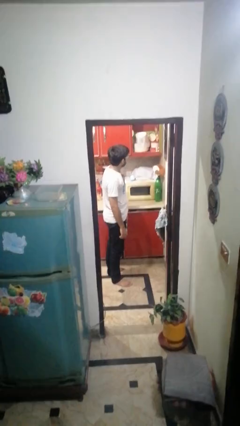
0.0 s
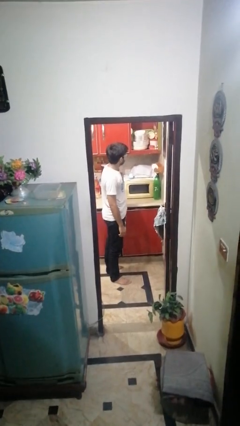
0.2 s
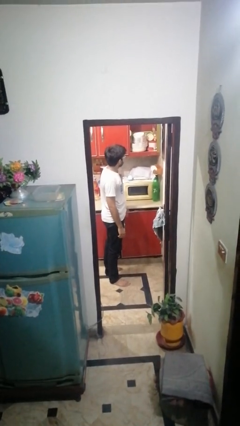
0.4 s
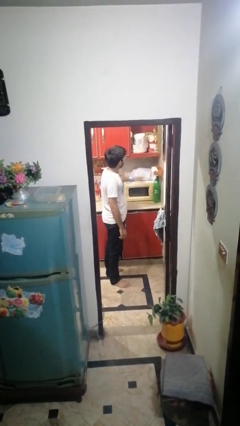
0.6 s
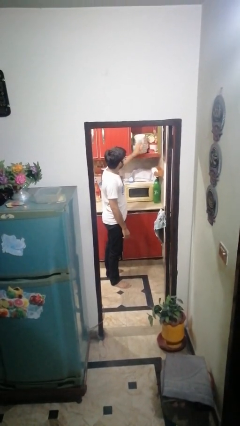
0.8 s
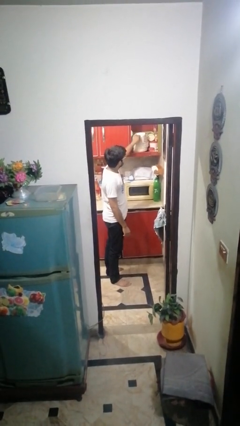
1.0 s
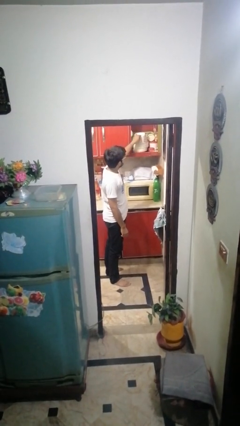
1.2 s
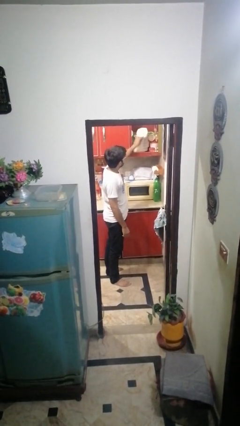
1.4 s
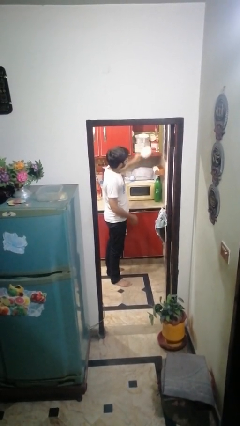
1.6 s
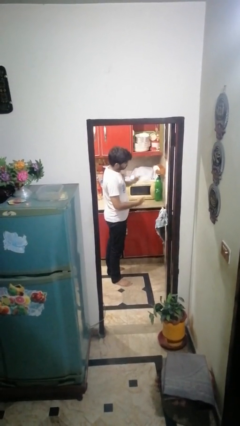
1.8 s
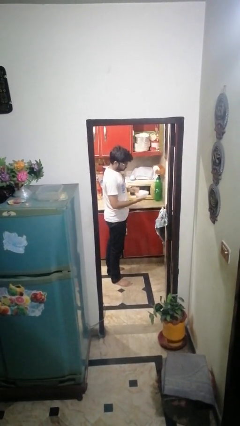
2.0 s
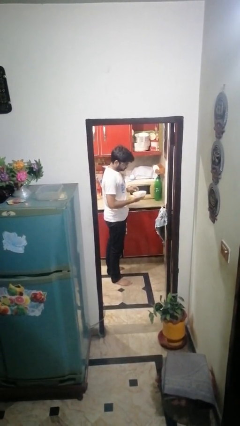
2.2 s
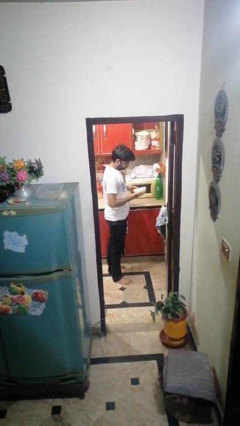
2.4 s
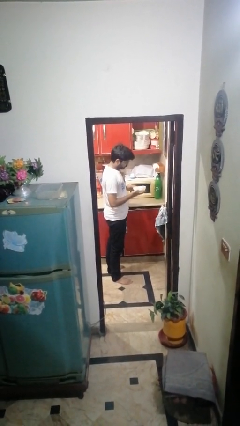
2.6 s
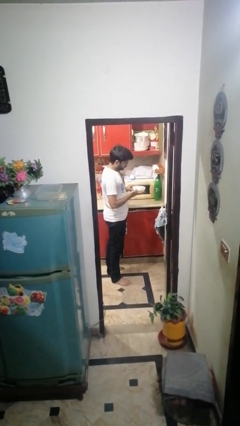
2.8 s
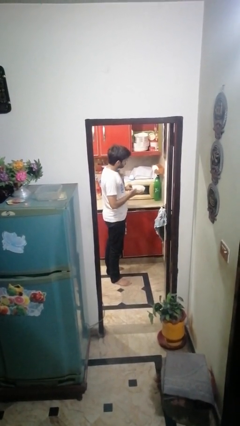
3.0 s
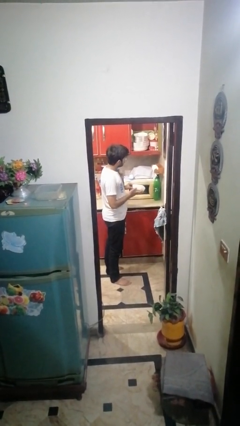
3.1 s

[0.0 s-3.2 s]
person picks up object from cabinet

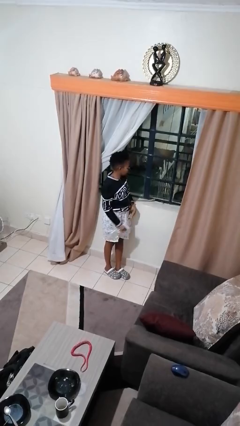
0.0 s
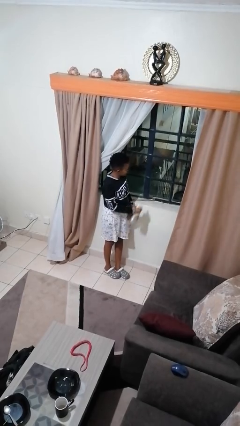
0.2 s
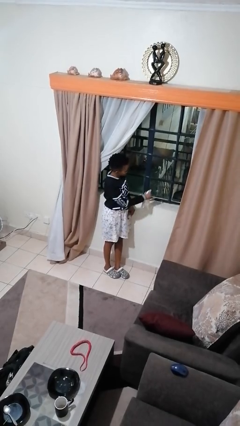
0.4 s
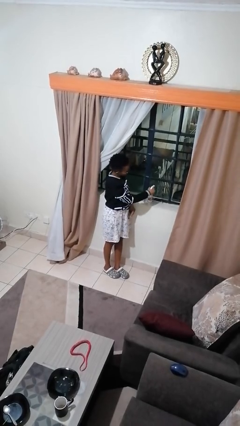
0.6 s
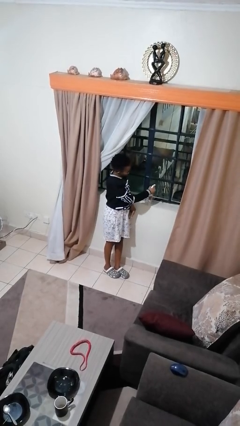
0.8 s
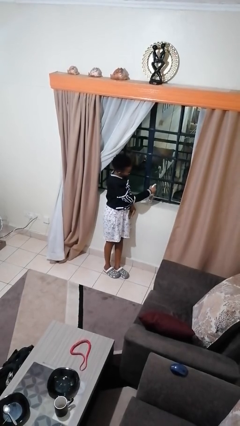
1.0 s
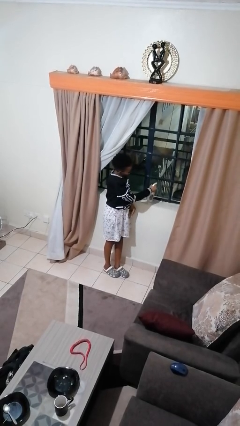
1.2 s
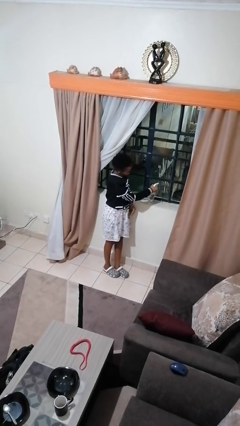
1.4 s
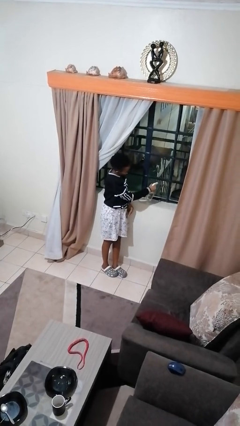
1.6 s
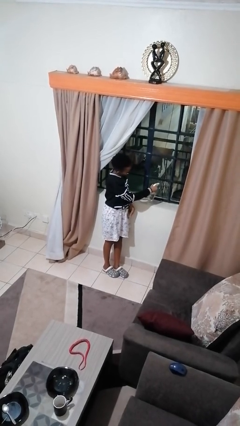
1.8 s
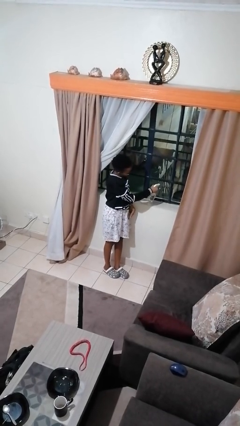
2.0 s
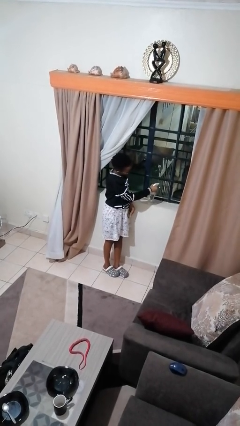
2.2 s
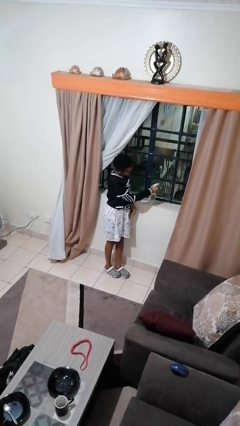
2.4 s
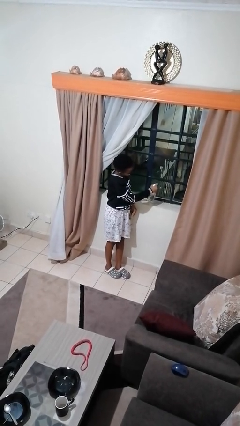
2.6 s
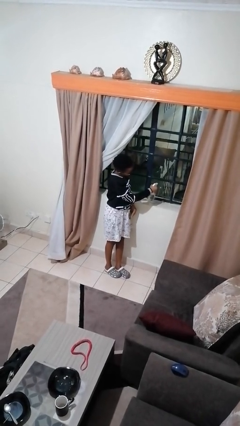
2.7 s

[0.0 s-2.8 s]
person sprays from bottle

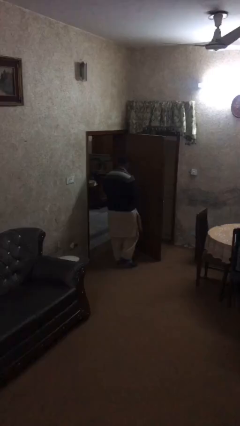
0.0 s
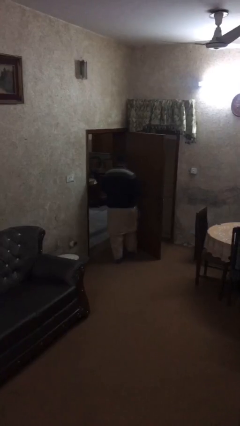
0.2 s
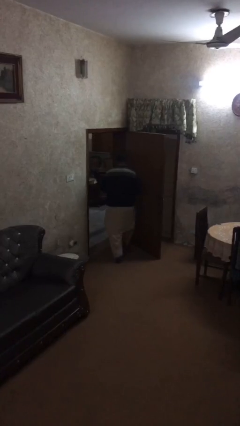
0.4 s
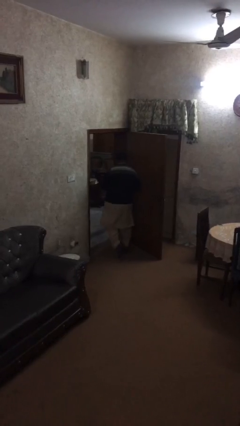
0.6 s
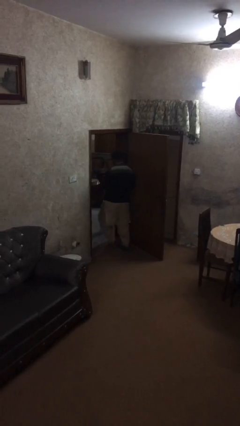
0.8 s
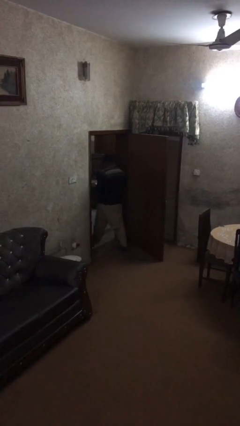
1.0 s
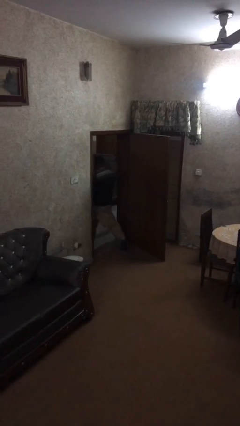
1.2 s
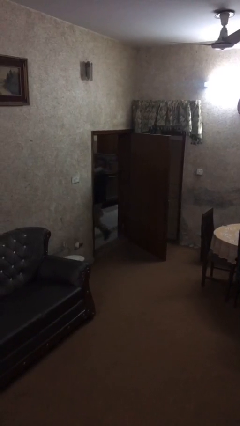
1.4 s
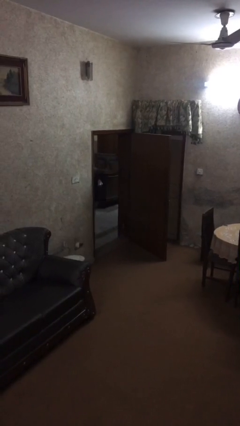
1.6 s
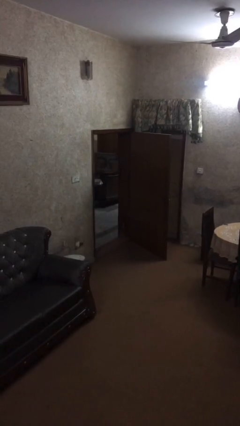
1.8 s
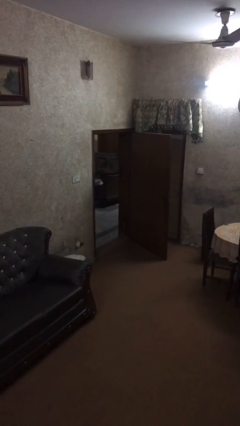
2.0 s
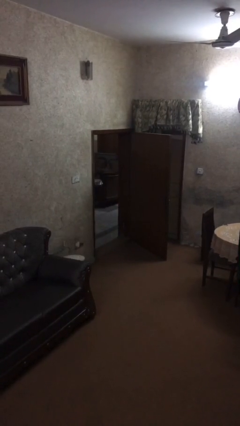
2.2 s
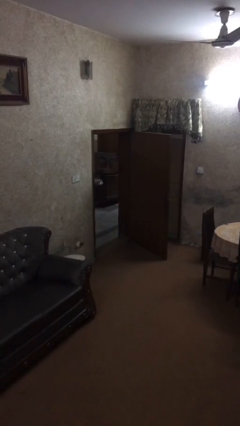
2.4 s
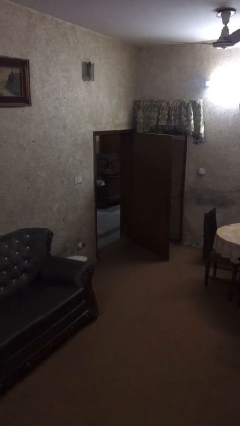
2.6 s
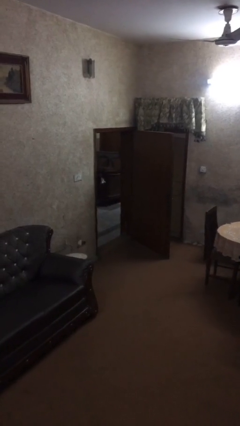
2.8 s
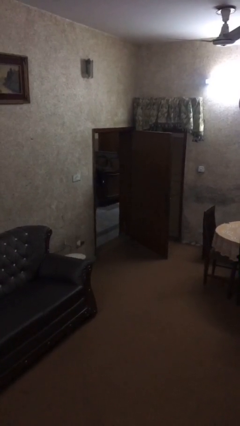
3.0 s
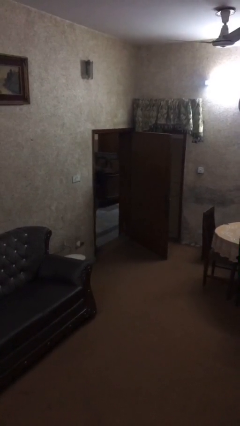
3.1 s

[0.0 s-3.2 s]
person exits scene through structure

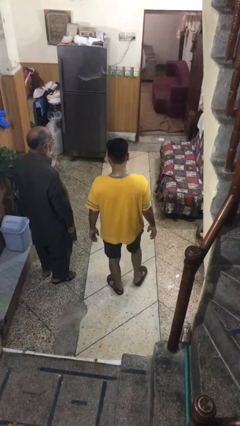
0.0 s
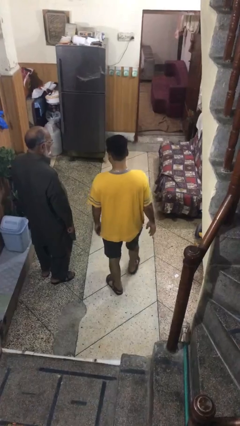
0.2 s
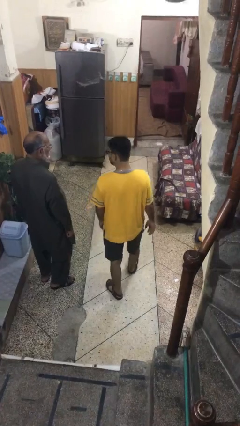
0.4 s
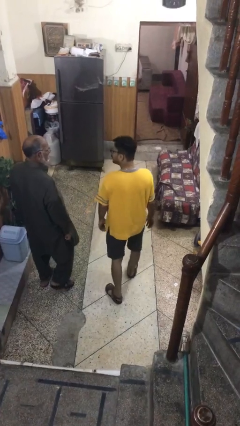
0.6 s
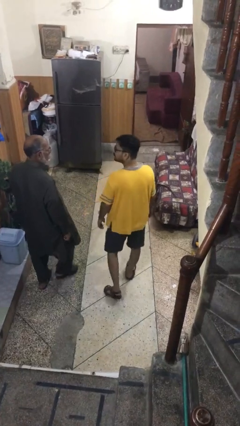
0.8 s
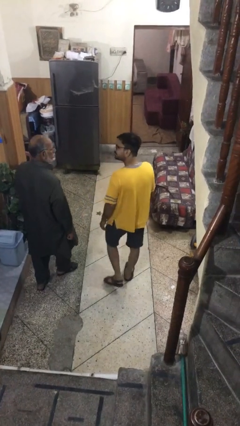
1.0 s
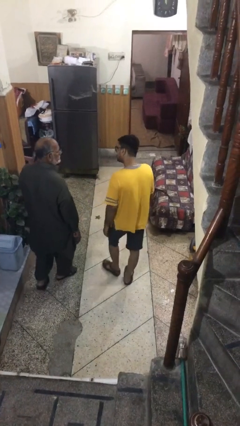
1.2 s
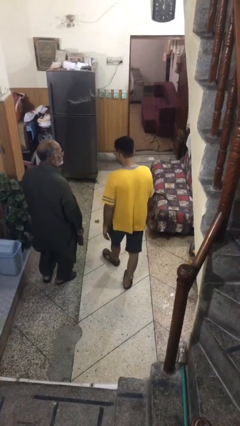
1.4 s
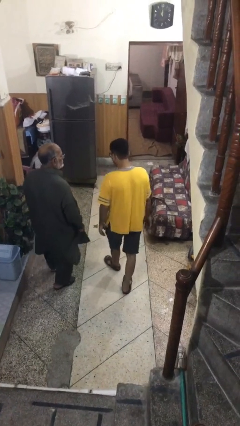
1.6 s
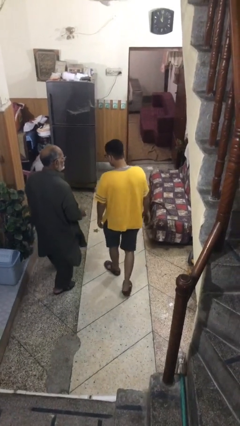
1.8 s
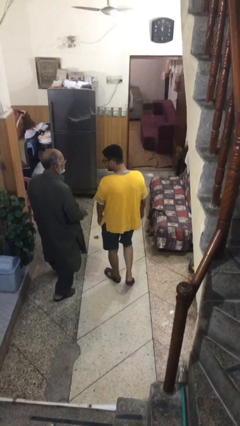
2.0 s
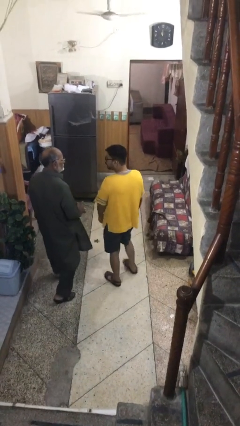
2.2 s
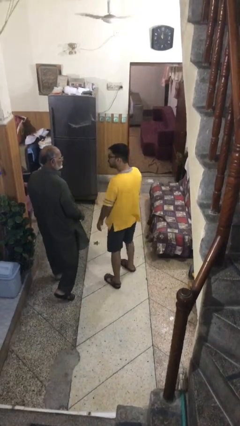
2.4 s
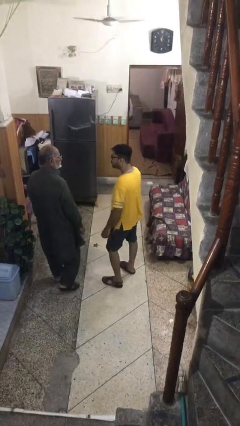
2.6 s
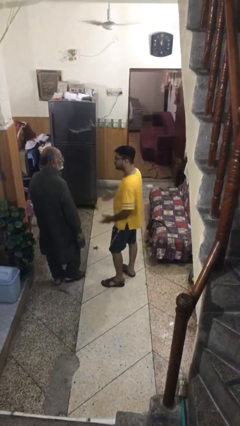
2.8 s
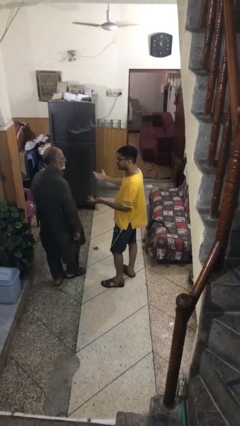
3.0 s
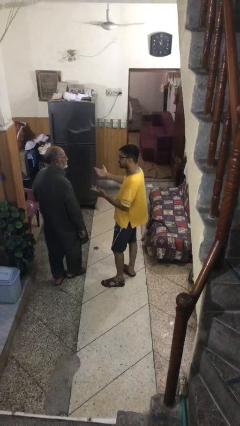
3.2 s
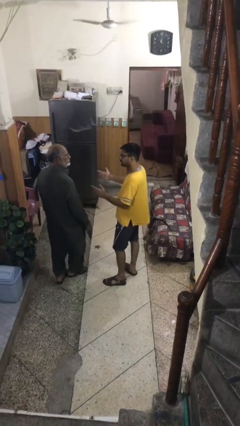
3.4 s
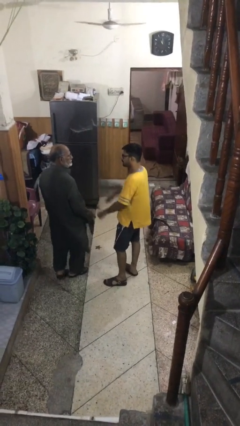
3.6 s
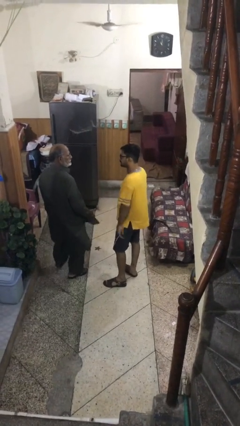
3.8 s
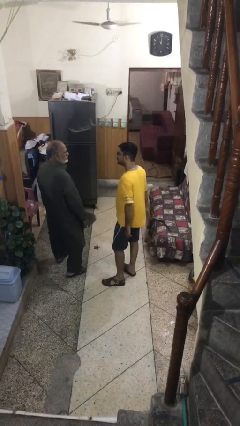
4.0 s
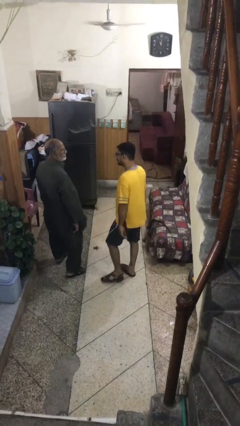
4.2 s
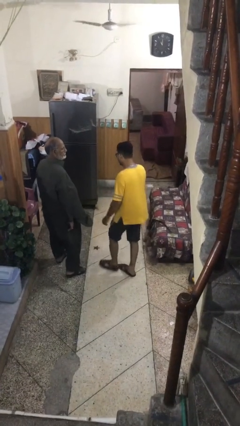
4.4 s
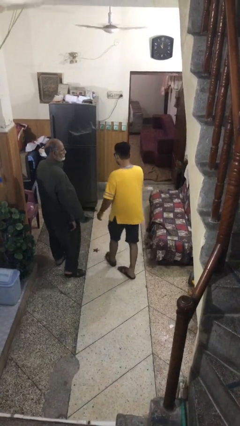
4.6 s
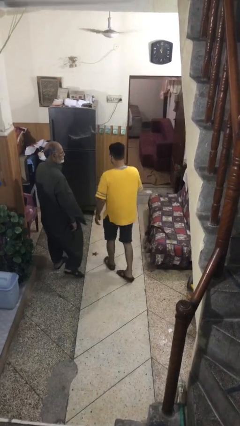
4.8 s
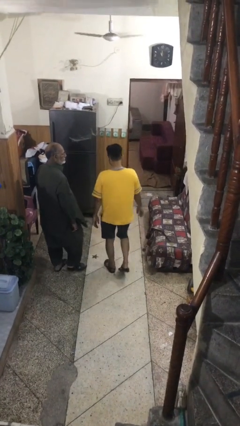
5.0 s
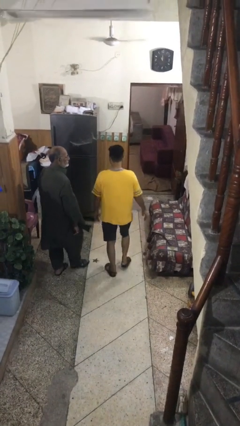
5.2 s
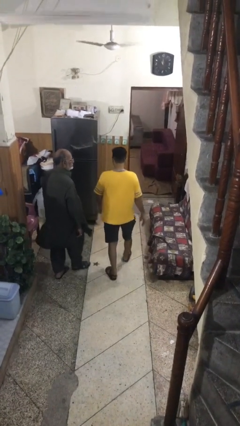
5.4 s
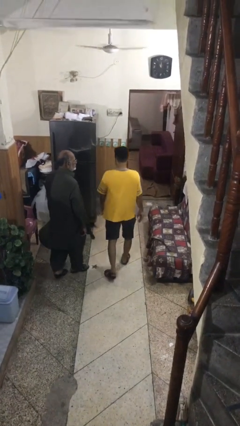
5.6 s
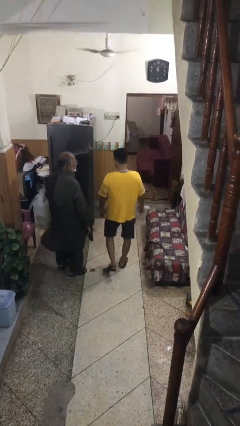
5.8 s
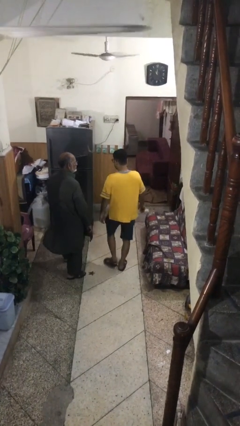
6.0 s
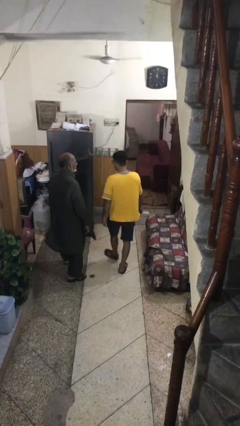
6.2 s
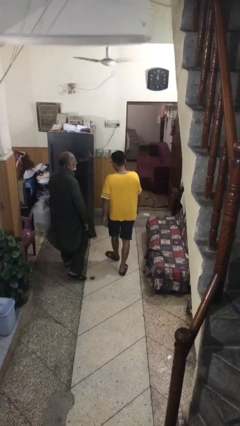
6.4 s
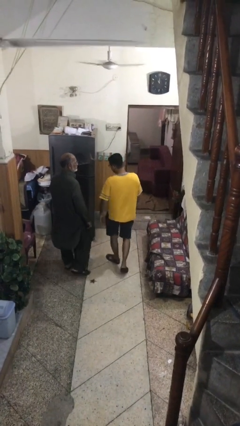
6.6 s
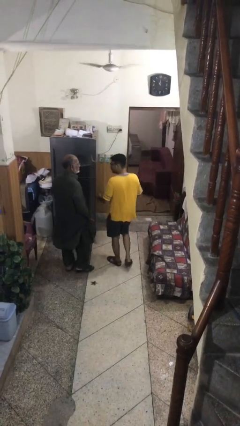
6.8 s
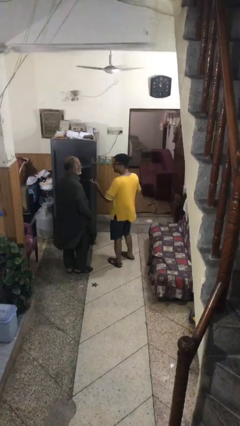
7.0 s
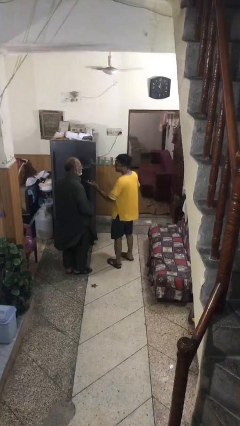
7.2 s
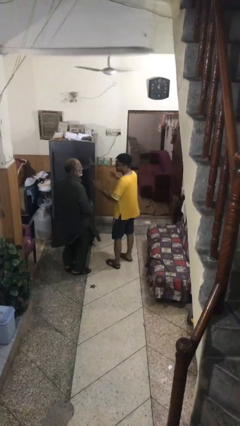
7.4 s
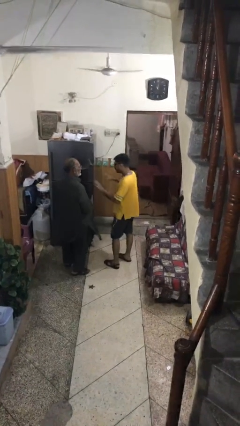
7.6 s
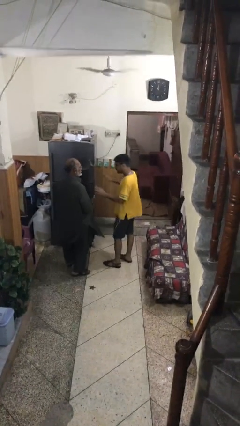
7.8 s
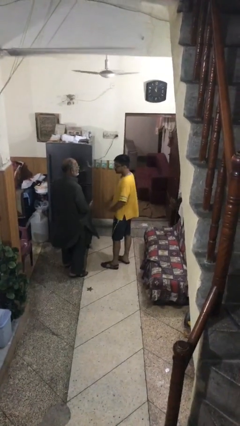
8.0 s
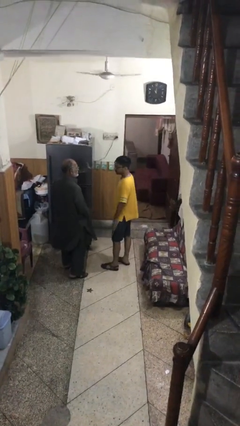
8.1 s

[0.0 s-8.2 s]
person talks to person

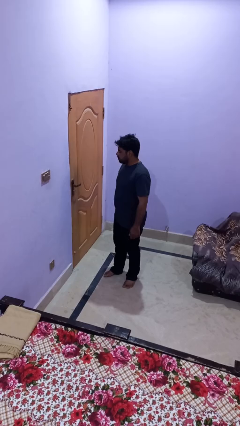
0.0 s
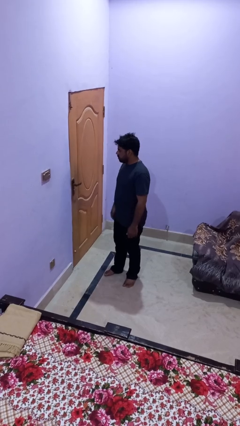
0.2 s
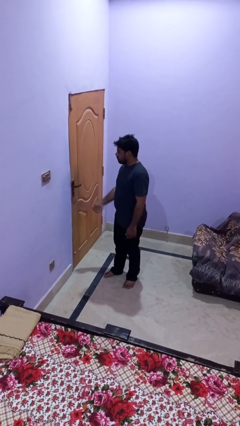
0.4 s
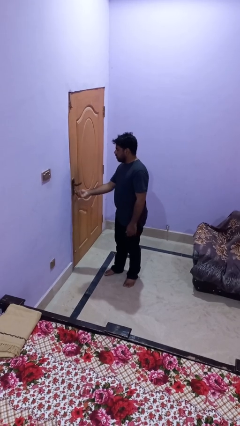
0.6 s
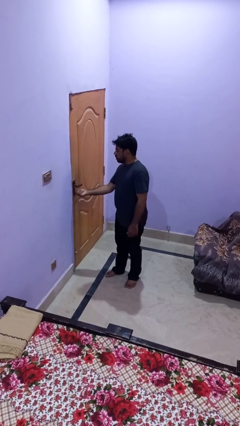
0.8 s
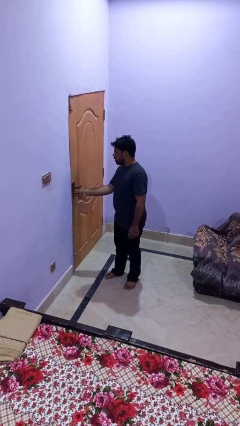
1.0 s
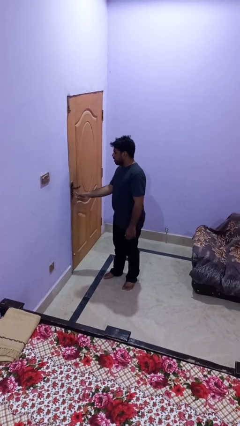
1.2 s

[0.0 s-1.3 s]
person locks door with keys
